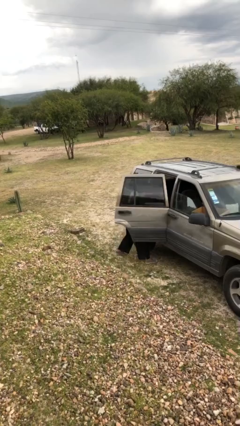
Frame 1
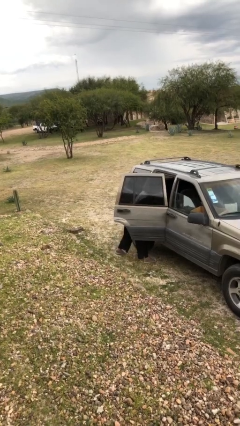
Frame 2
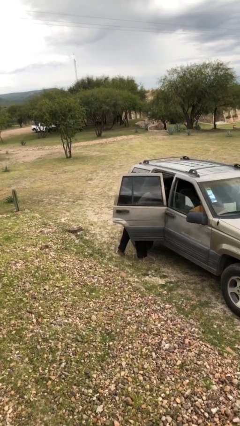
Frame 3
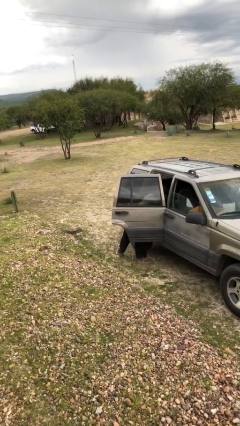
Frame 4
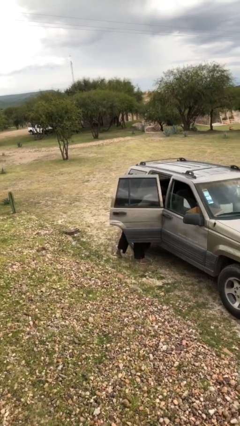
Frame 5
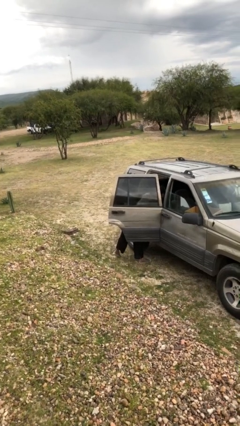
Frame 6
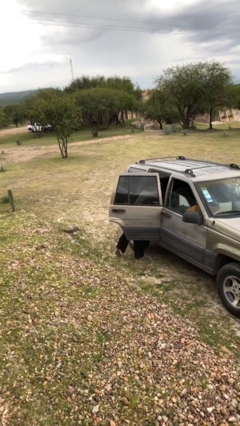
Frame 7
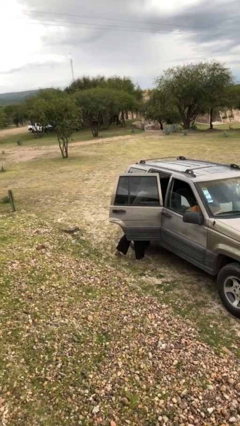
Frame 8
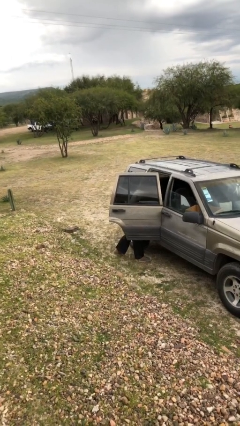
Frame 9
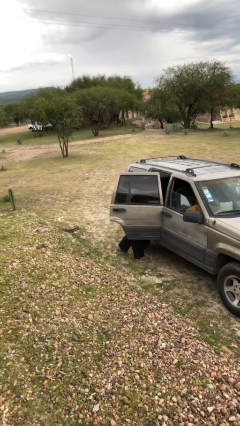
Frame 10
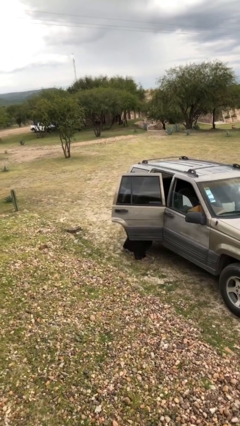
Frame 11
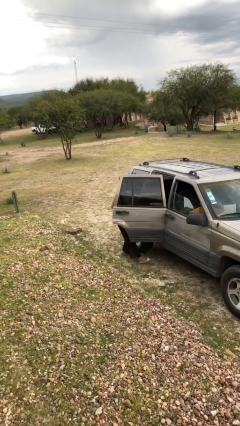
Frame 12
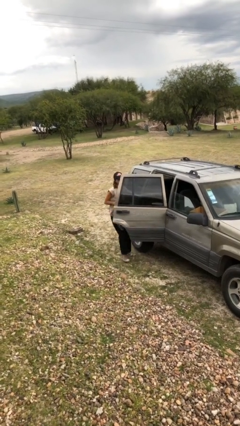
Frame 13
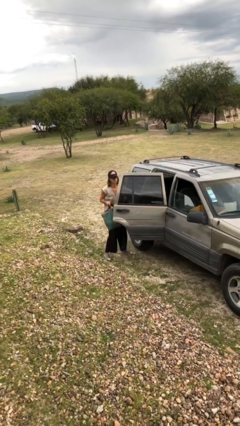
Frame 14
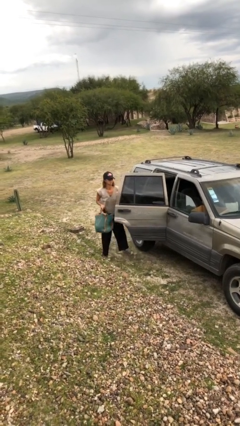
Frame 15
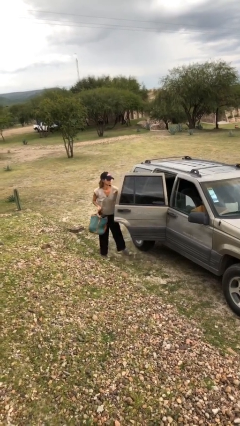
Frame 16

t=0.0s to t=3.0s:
person unloads car

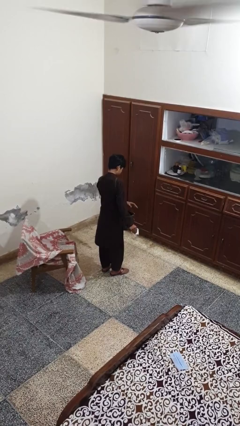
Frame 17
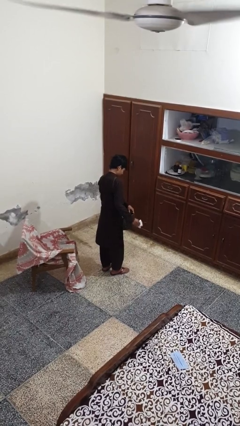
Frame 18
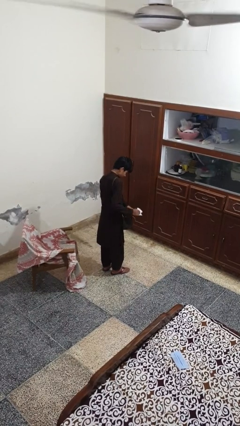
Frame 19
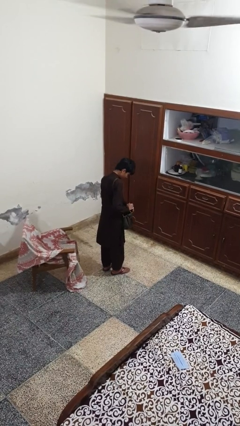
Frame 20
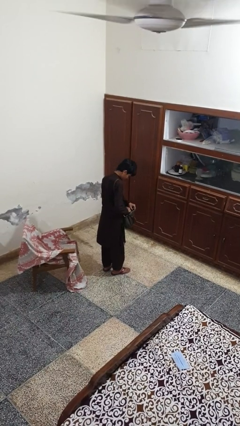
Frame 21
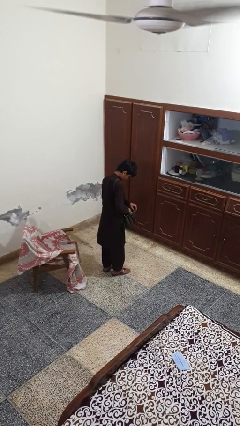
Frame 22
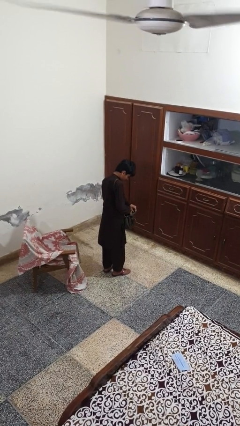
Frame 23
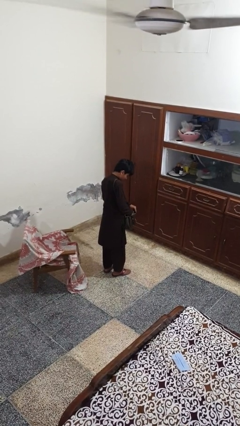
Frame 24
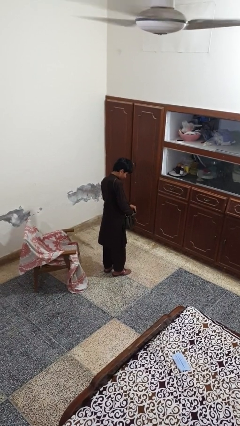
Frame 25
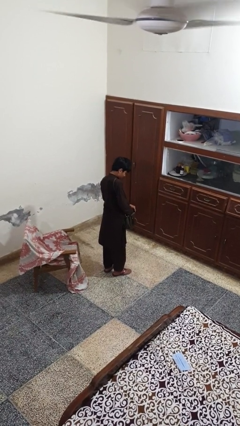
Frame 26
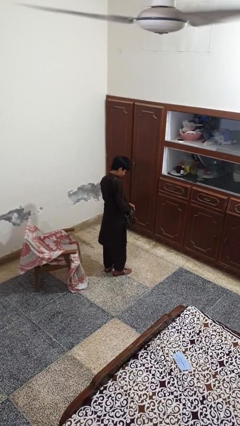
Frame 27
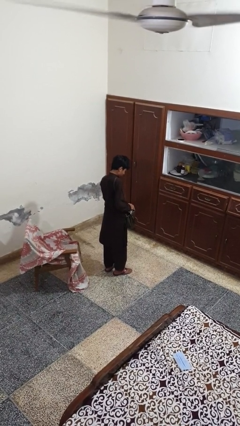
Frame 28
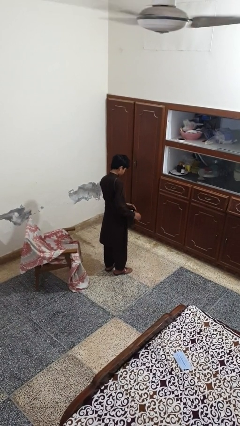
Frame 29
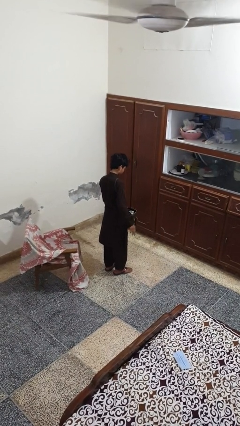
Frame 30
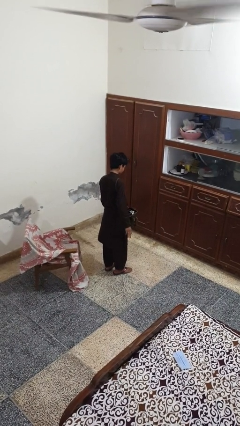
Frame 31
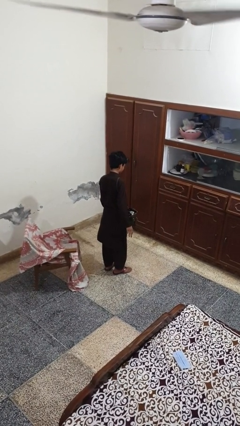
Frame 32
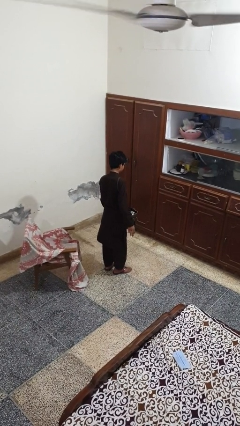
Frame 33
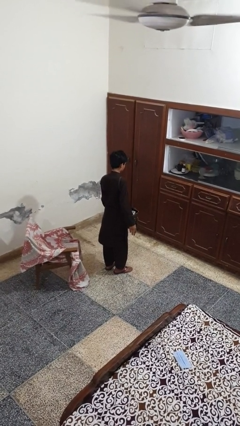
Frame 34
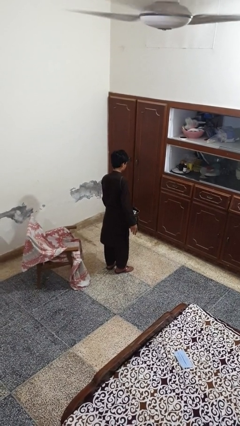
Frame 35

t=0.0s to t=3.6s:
person puts object into purse

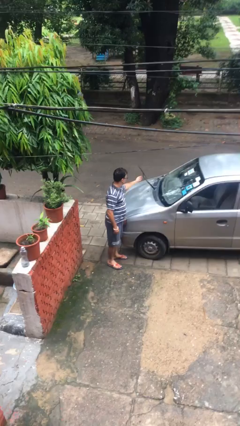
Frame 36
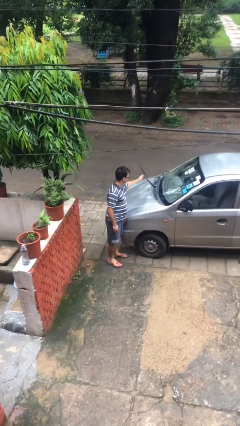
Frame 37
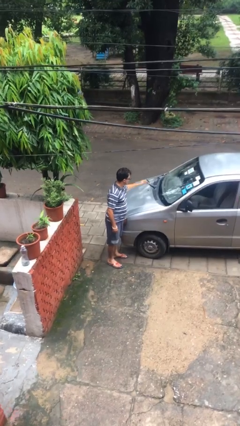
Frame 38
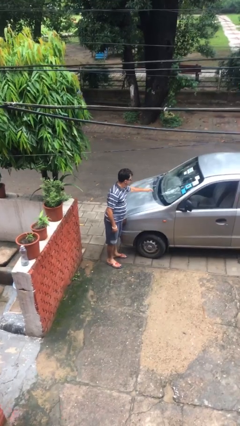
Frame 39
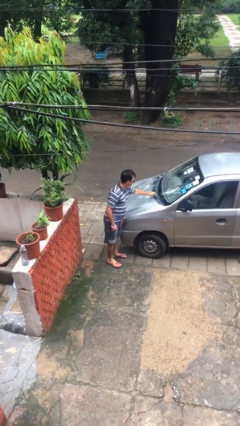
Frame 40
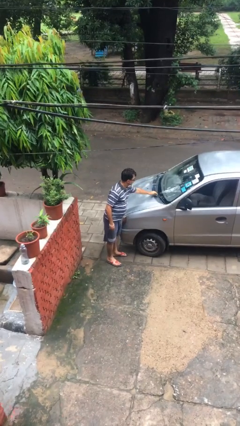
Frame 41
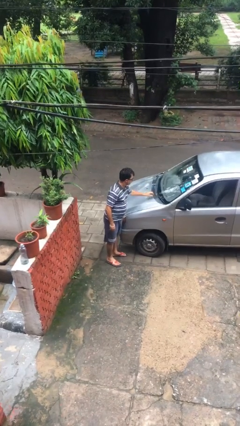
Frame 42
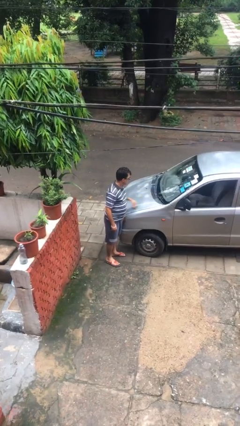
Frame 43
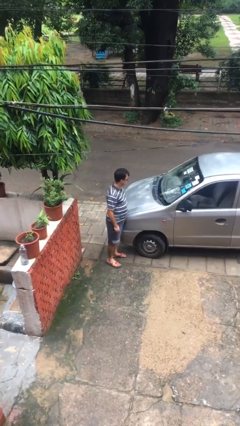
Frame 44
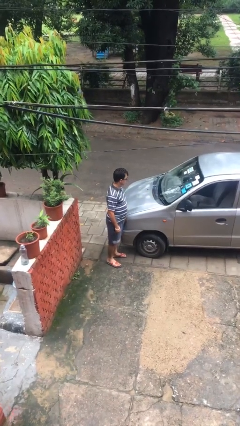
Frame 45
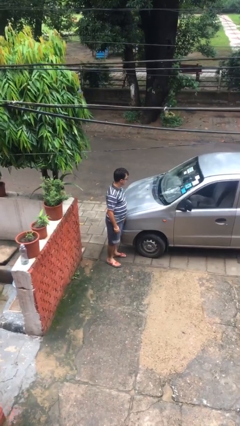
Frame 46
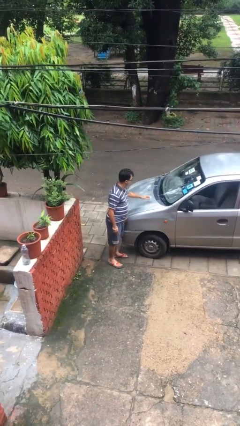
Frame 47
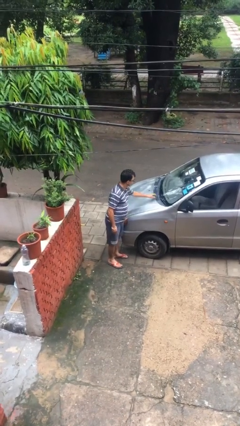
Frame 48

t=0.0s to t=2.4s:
person flips down car wipers

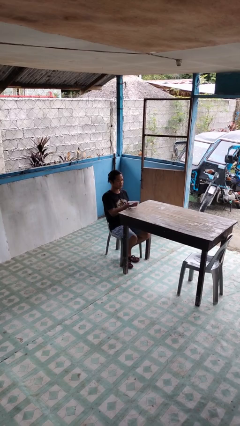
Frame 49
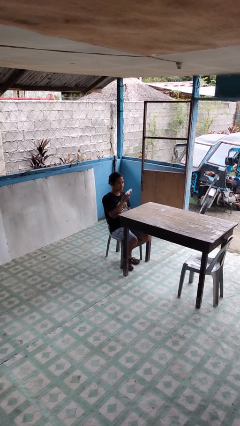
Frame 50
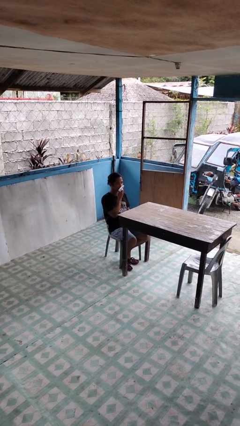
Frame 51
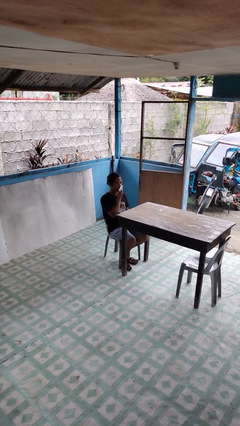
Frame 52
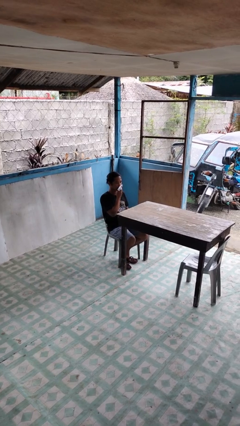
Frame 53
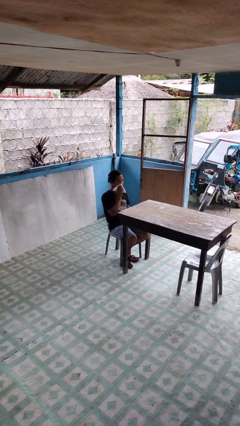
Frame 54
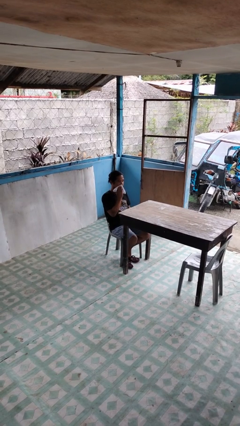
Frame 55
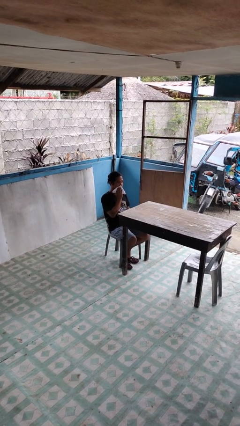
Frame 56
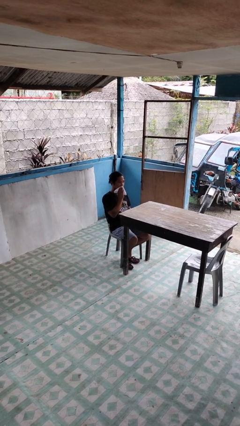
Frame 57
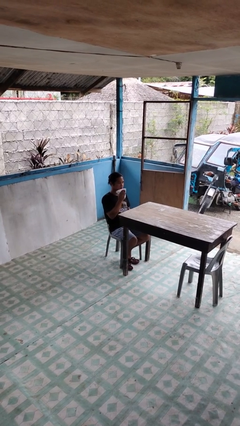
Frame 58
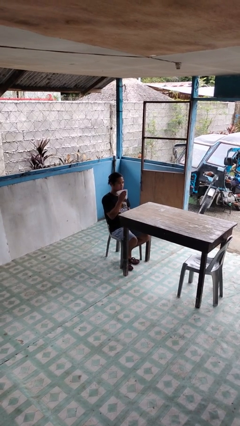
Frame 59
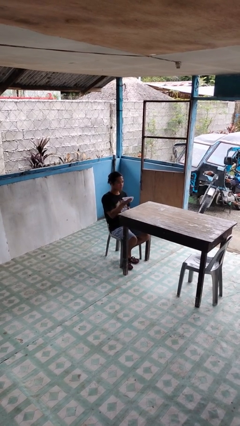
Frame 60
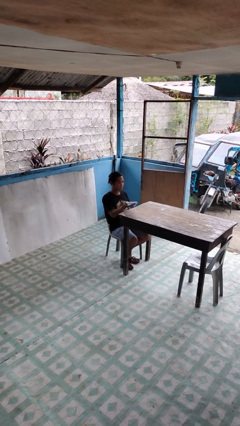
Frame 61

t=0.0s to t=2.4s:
person wipes mouth with napkin

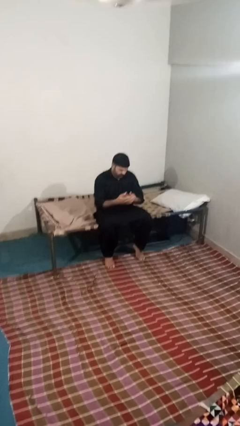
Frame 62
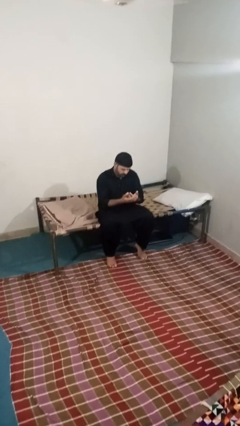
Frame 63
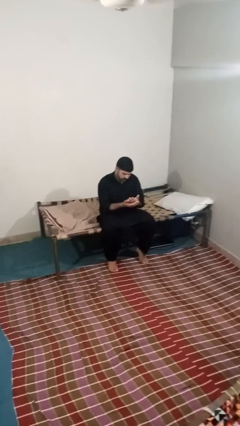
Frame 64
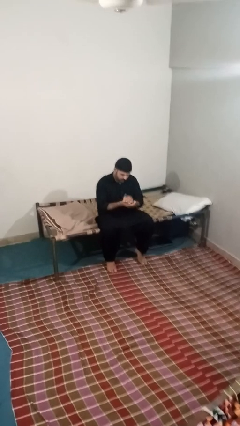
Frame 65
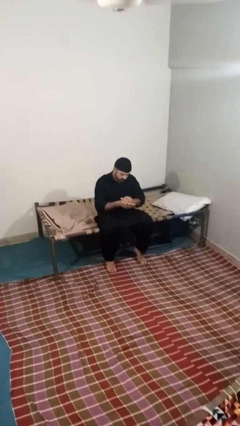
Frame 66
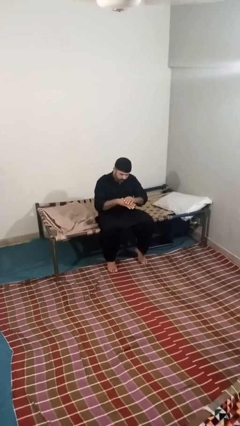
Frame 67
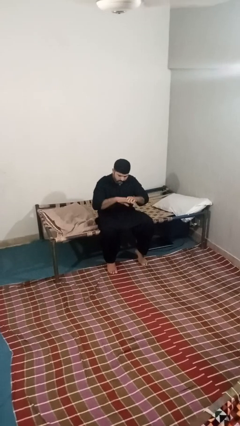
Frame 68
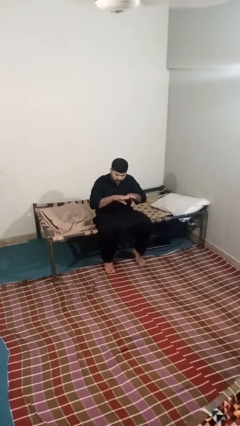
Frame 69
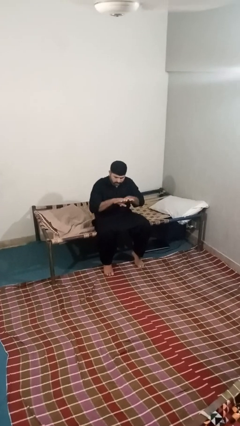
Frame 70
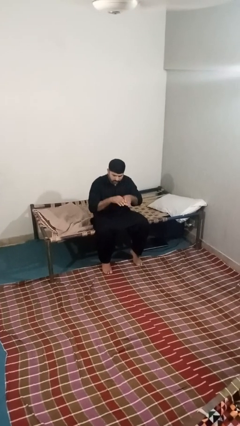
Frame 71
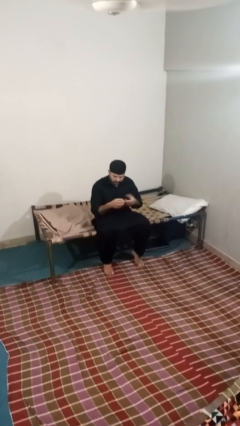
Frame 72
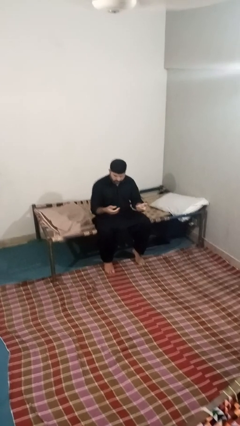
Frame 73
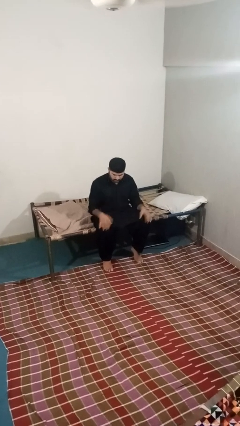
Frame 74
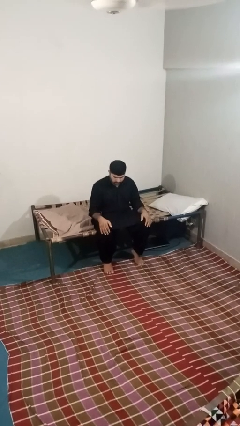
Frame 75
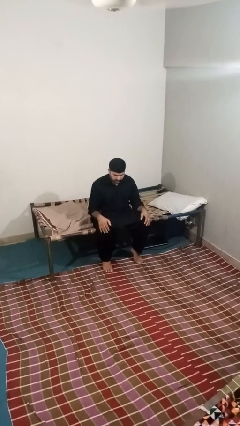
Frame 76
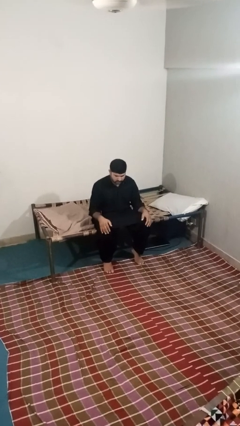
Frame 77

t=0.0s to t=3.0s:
person looks at hands in lap

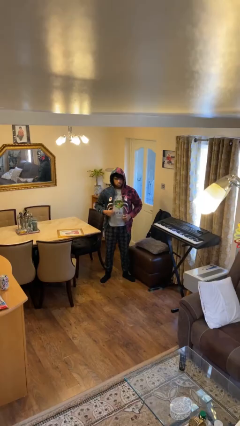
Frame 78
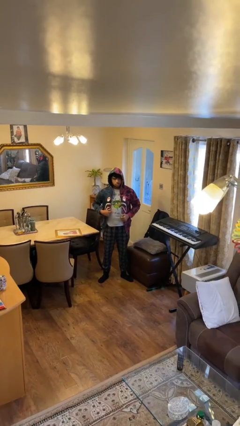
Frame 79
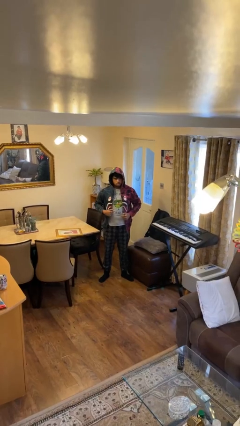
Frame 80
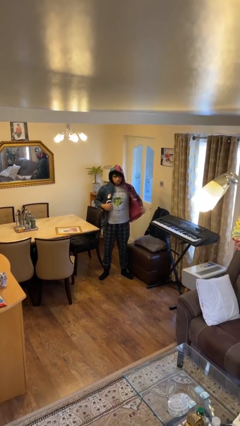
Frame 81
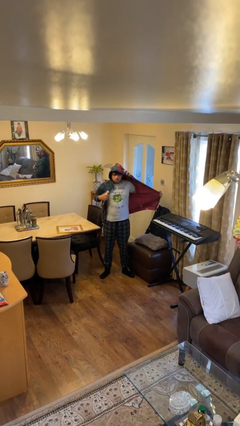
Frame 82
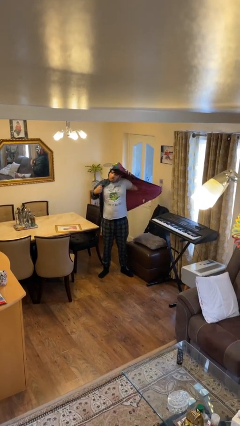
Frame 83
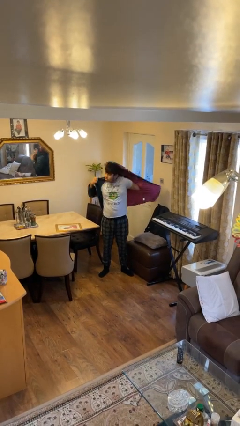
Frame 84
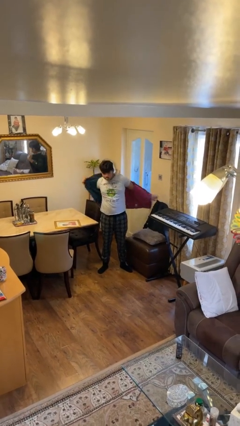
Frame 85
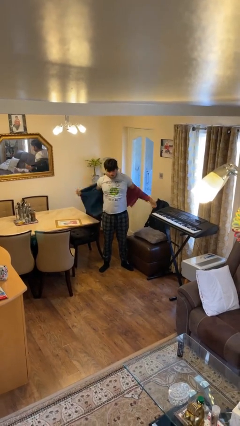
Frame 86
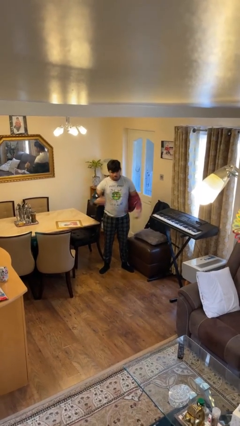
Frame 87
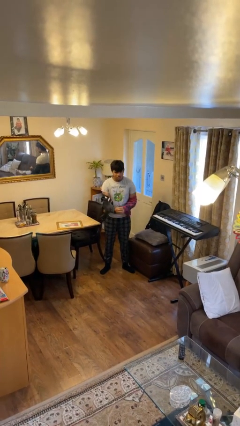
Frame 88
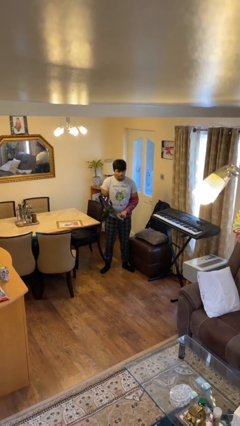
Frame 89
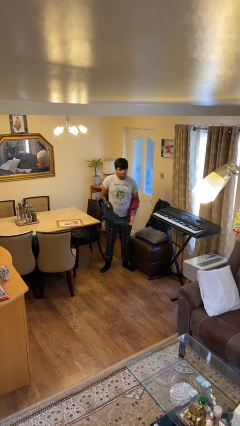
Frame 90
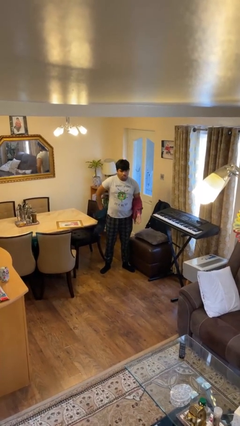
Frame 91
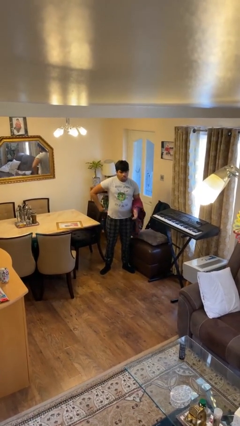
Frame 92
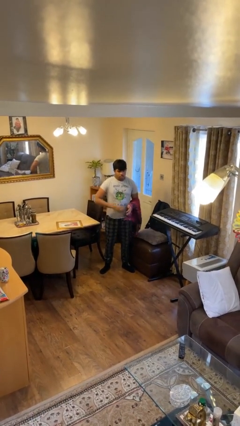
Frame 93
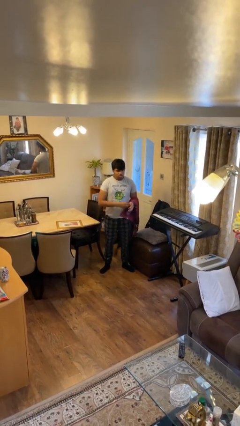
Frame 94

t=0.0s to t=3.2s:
person takes off hoodie

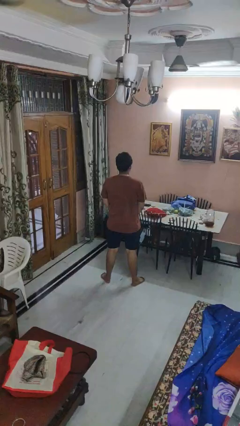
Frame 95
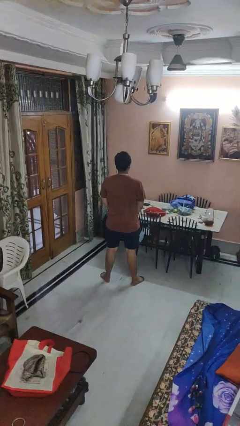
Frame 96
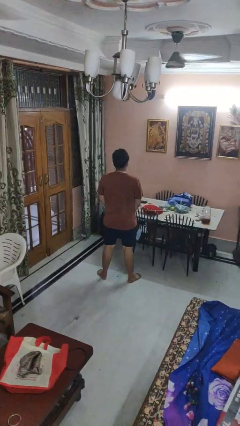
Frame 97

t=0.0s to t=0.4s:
person gestures be quiet
